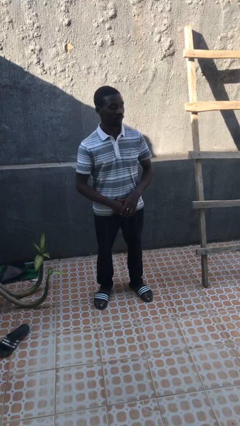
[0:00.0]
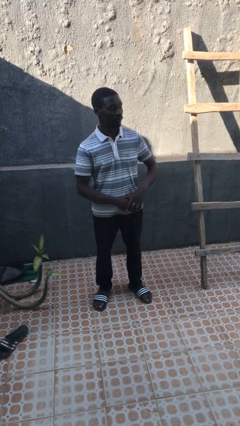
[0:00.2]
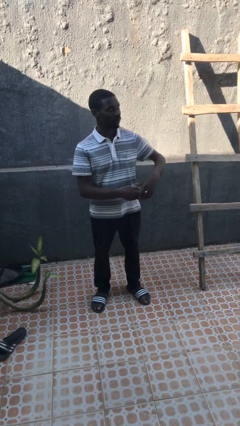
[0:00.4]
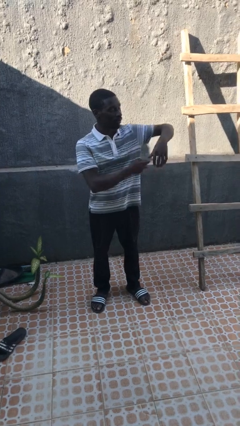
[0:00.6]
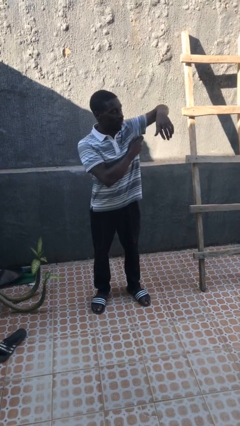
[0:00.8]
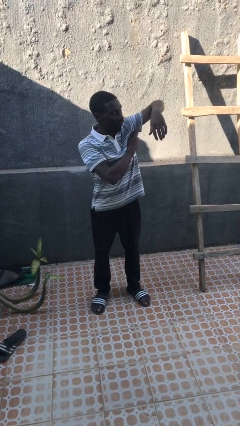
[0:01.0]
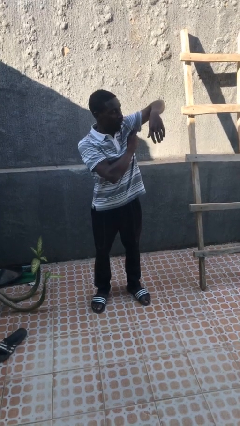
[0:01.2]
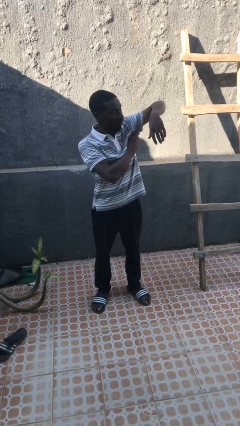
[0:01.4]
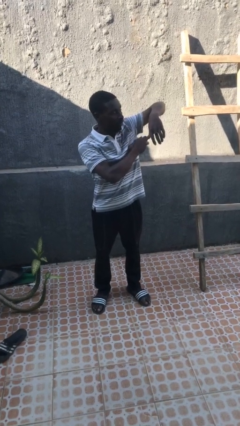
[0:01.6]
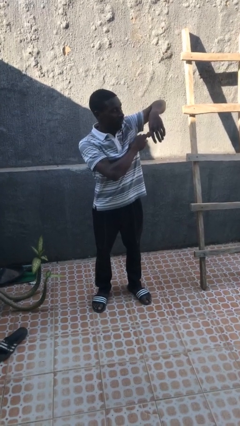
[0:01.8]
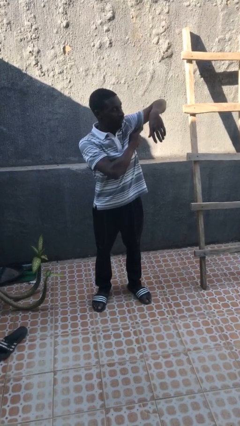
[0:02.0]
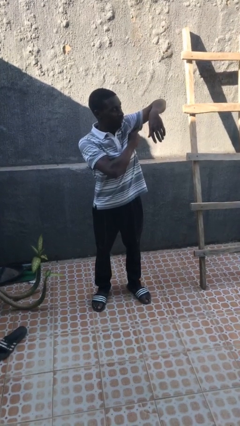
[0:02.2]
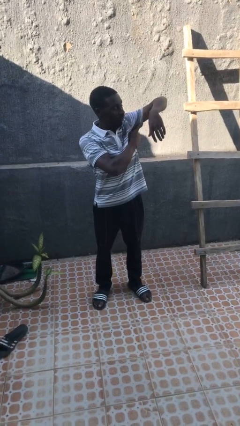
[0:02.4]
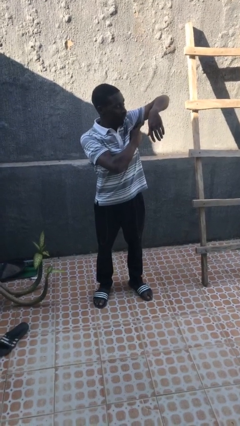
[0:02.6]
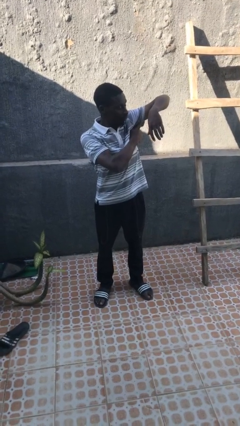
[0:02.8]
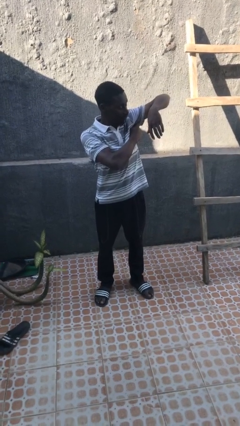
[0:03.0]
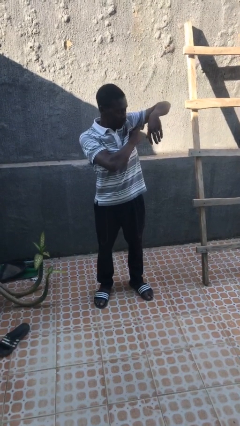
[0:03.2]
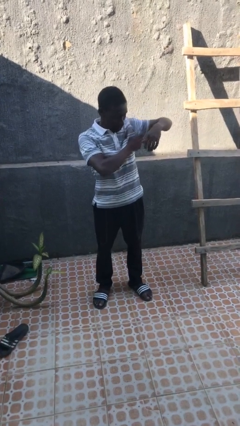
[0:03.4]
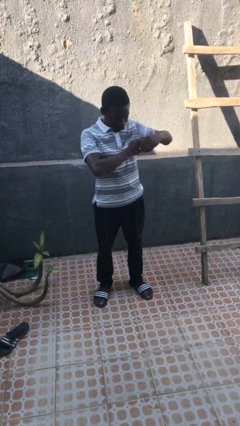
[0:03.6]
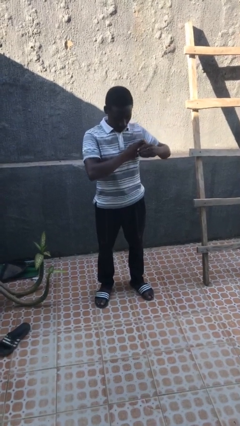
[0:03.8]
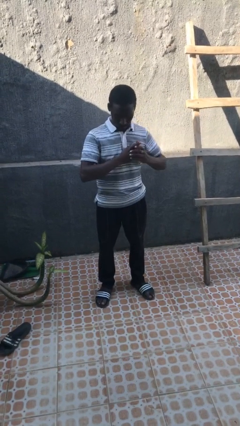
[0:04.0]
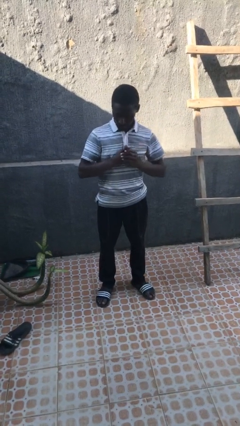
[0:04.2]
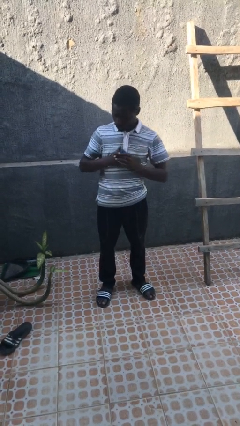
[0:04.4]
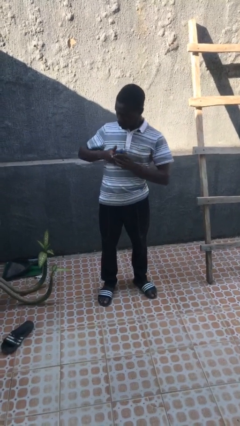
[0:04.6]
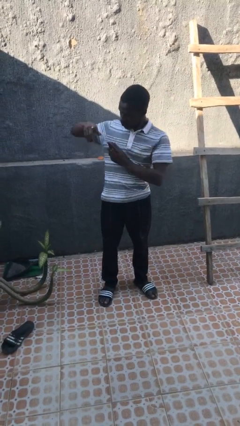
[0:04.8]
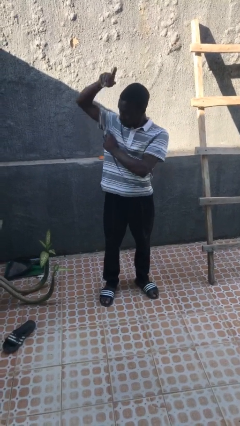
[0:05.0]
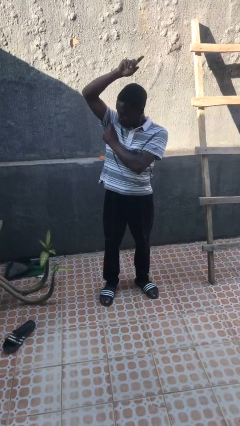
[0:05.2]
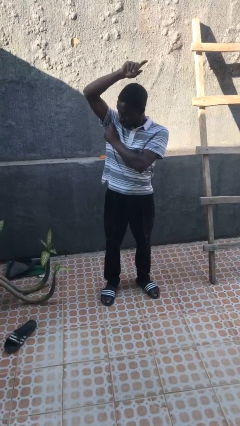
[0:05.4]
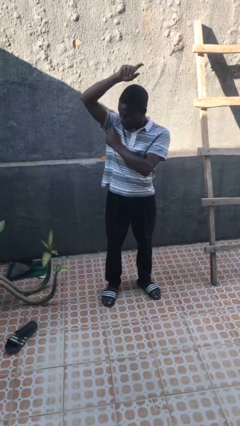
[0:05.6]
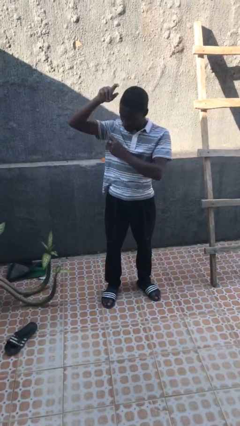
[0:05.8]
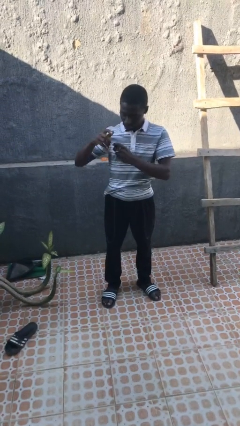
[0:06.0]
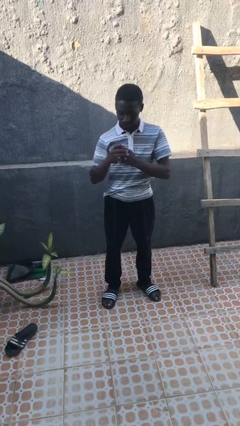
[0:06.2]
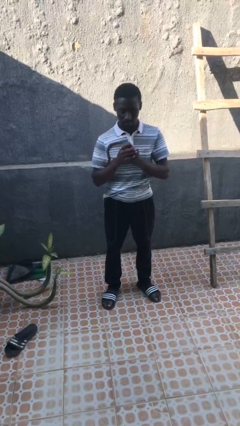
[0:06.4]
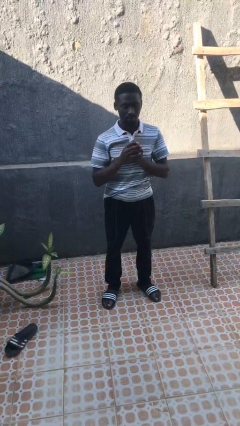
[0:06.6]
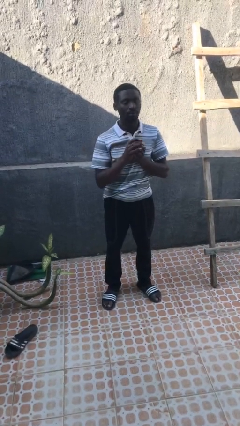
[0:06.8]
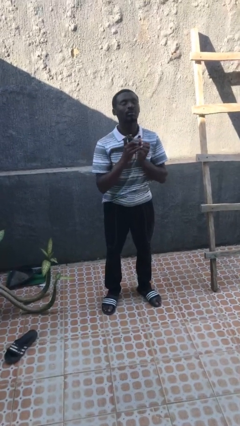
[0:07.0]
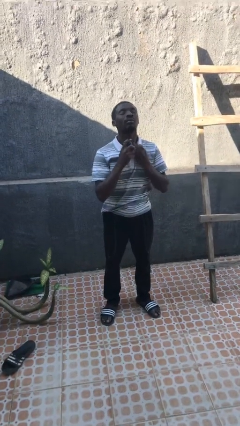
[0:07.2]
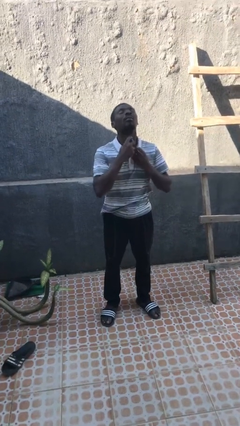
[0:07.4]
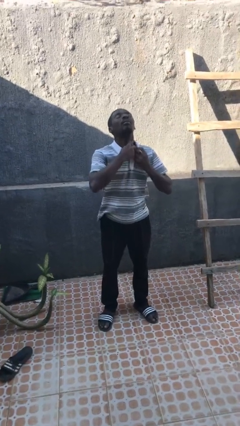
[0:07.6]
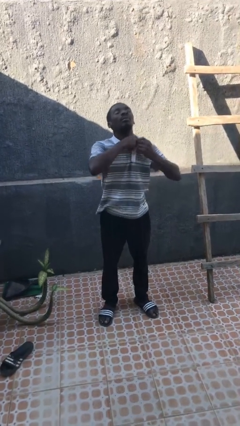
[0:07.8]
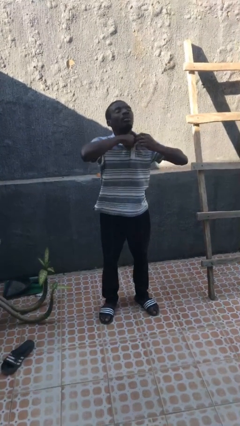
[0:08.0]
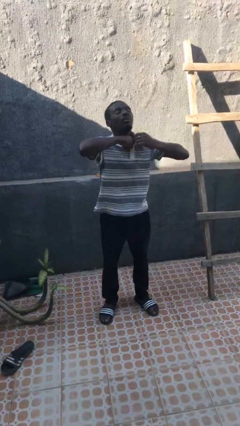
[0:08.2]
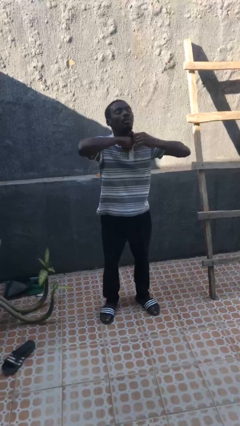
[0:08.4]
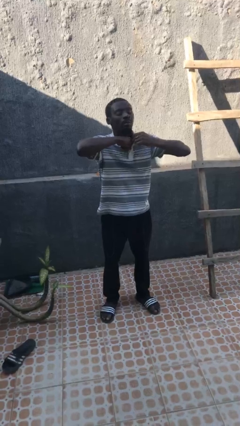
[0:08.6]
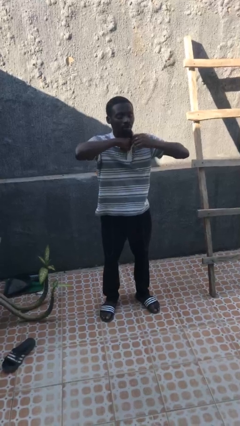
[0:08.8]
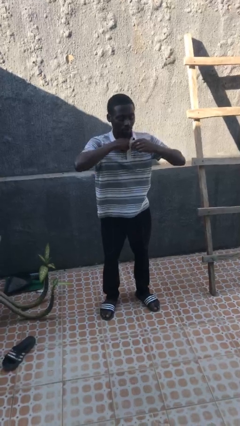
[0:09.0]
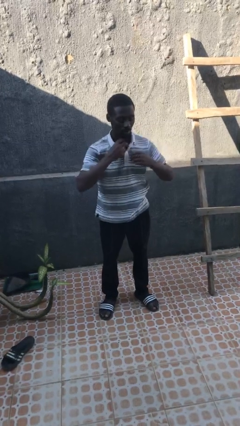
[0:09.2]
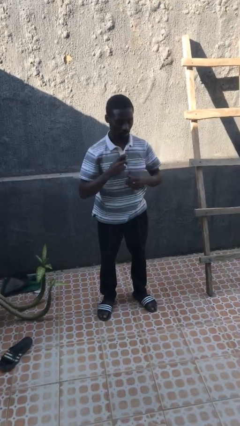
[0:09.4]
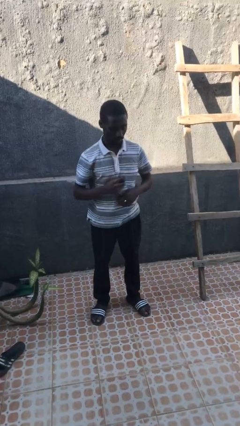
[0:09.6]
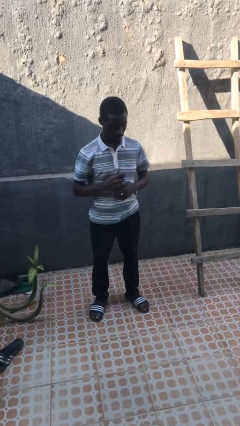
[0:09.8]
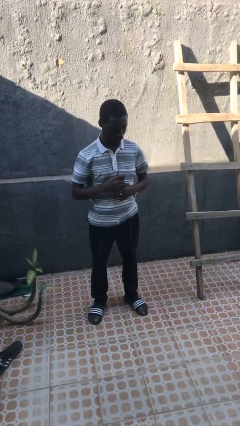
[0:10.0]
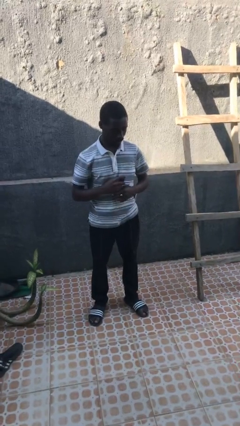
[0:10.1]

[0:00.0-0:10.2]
person applies deodorant

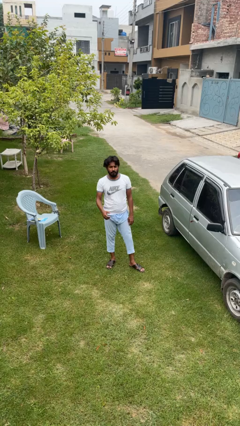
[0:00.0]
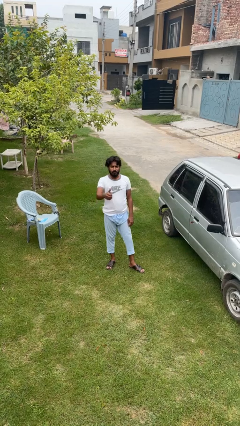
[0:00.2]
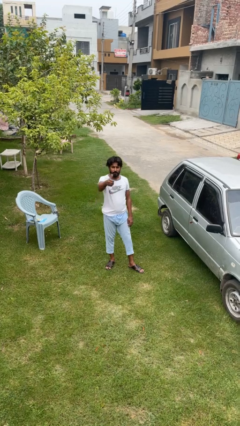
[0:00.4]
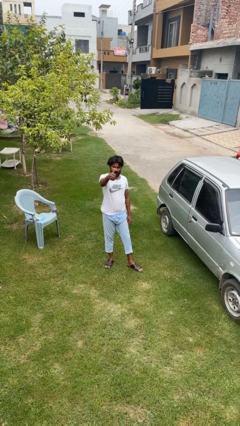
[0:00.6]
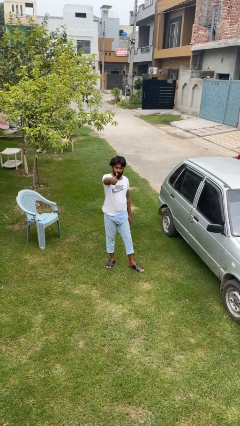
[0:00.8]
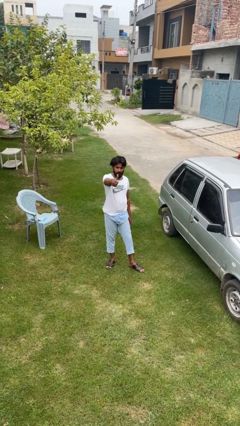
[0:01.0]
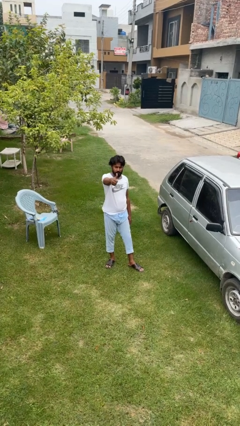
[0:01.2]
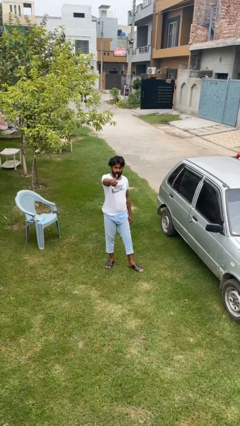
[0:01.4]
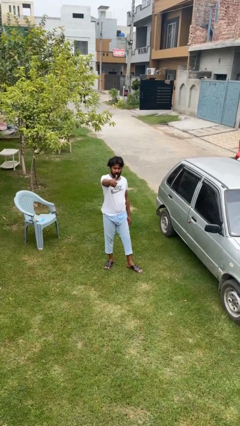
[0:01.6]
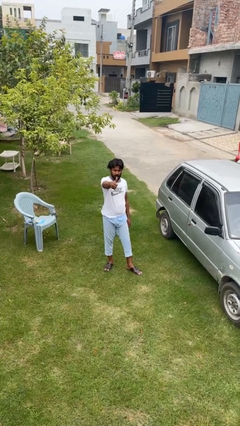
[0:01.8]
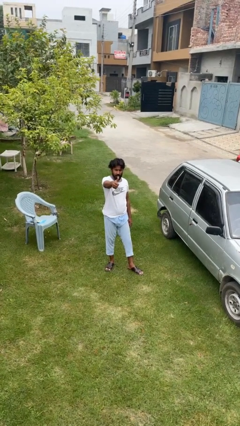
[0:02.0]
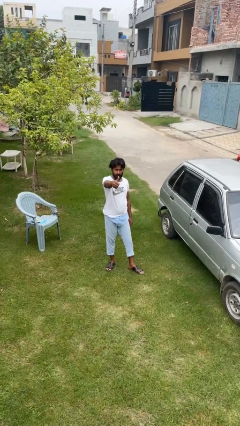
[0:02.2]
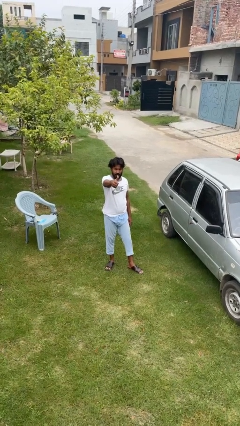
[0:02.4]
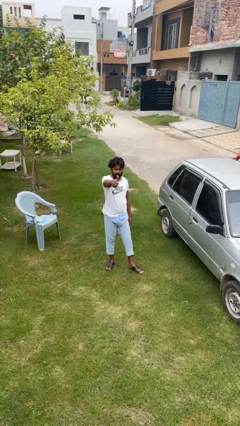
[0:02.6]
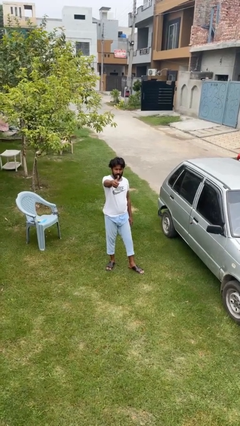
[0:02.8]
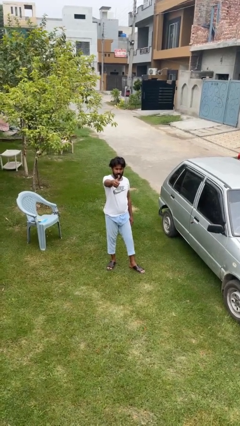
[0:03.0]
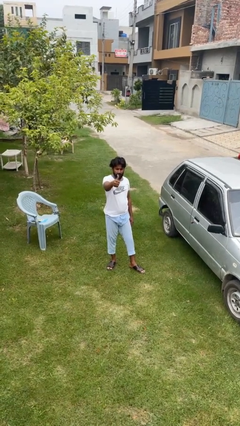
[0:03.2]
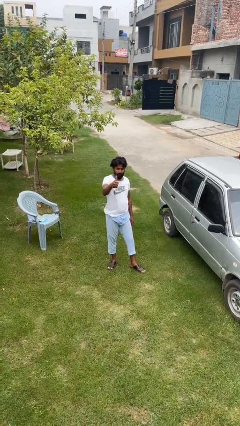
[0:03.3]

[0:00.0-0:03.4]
person gestures thumbs up

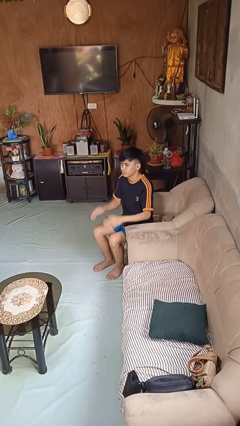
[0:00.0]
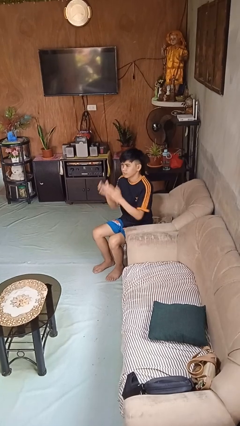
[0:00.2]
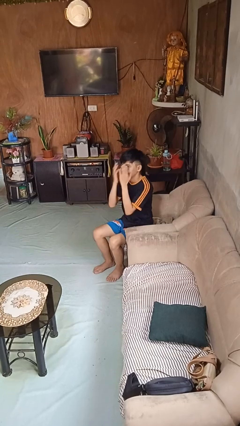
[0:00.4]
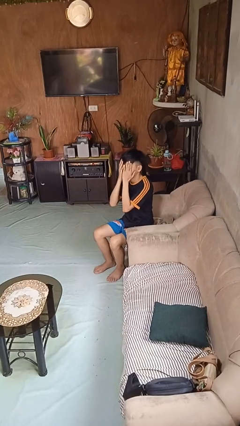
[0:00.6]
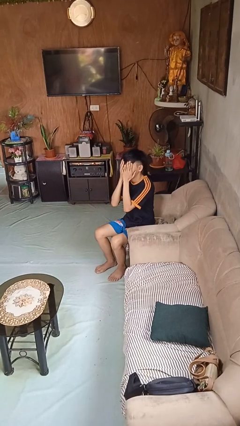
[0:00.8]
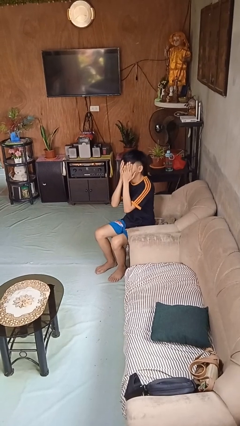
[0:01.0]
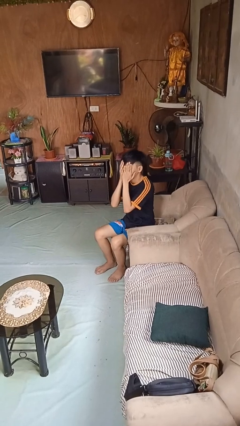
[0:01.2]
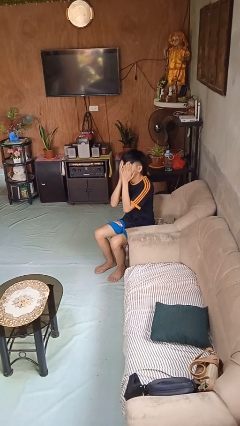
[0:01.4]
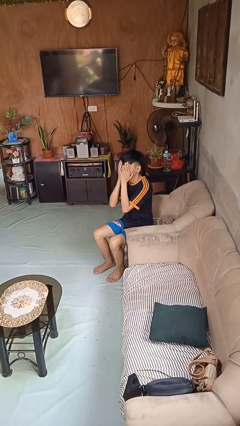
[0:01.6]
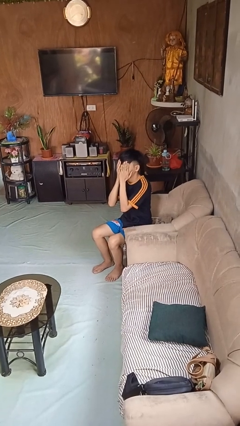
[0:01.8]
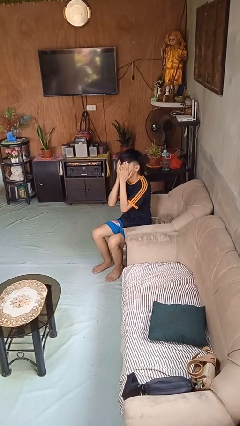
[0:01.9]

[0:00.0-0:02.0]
person covers face with hands

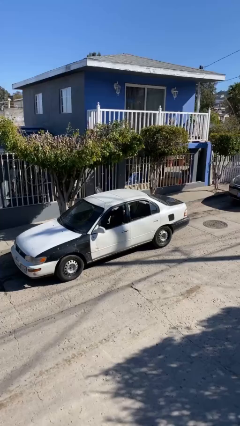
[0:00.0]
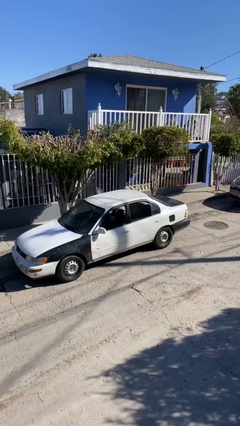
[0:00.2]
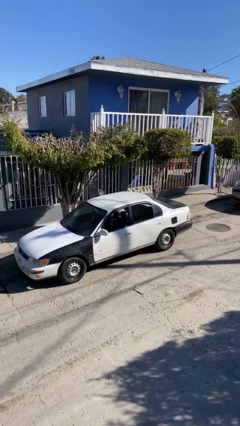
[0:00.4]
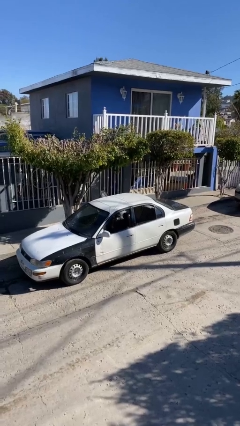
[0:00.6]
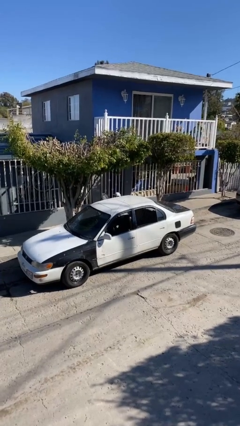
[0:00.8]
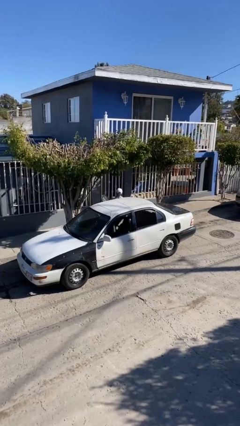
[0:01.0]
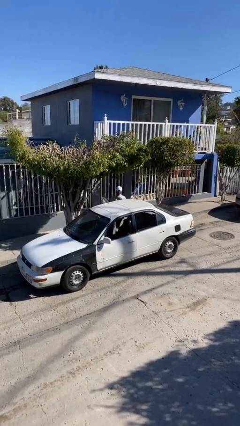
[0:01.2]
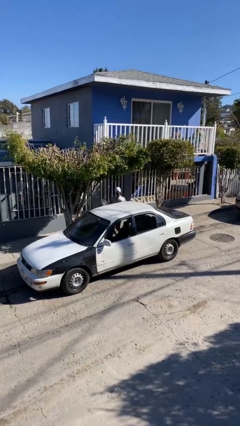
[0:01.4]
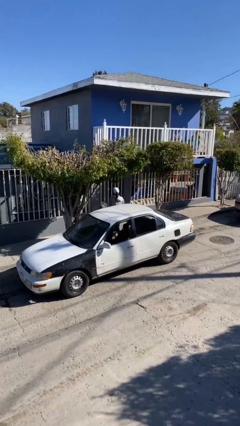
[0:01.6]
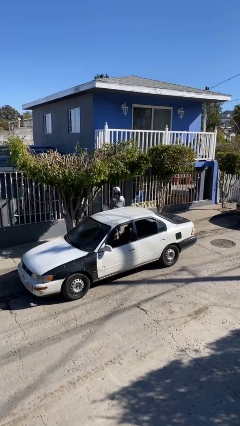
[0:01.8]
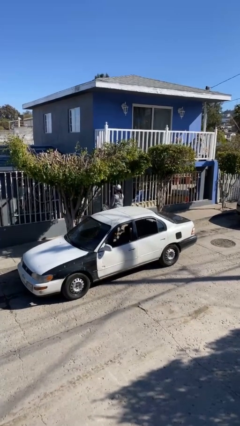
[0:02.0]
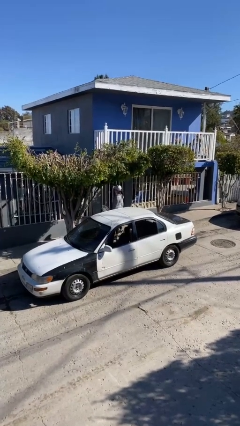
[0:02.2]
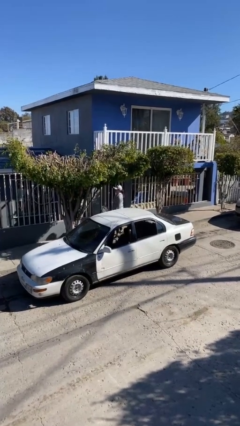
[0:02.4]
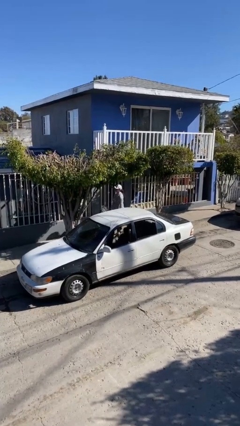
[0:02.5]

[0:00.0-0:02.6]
person exits car
